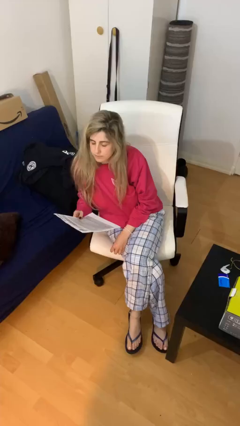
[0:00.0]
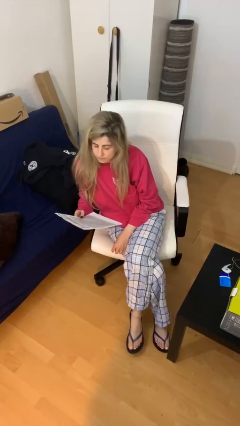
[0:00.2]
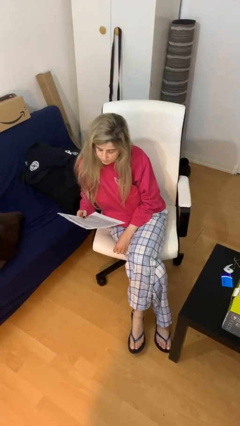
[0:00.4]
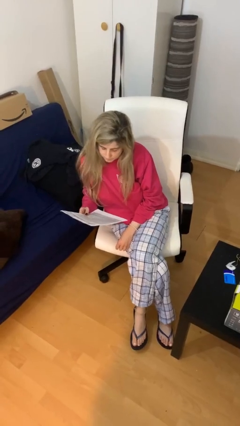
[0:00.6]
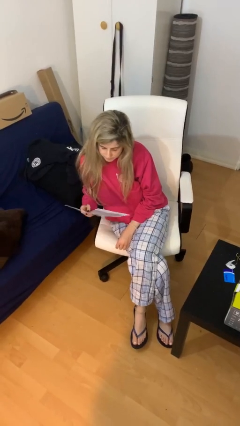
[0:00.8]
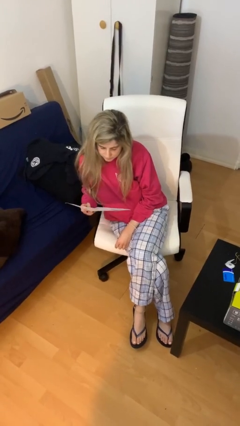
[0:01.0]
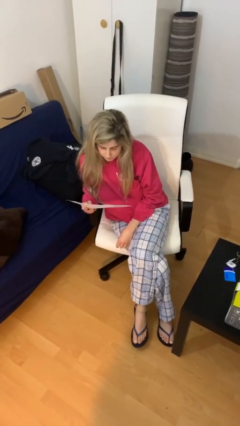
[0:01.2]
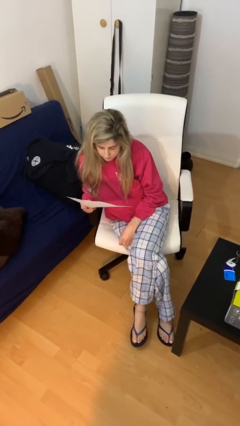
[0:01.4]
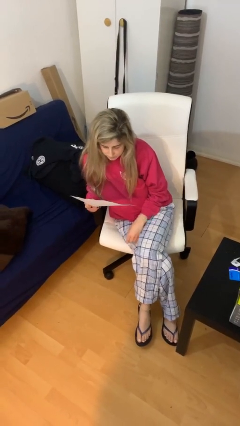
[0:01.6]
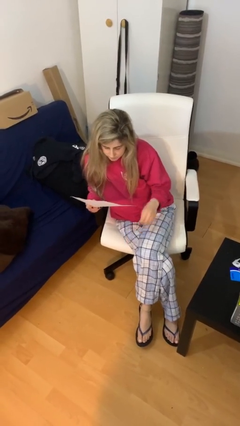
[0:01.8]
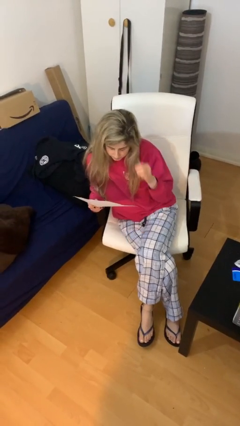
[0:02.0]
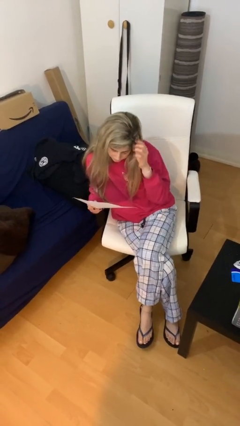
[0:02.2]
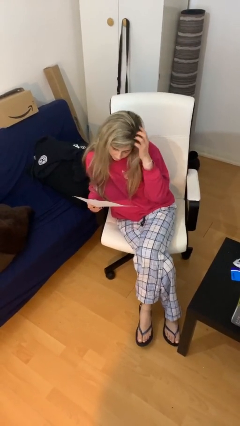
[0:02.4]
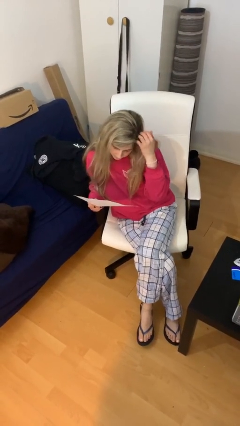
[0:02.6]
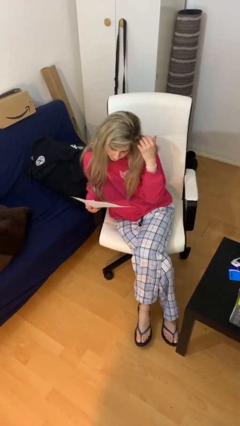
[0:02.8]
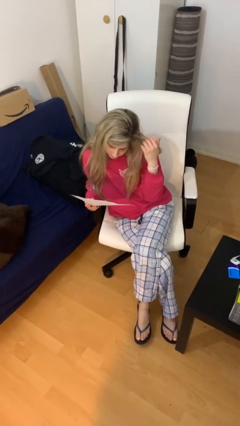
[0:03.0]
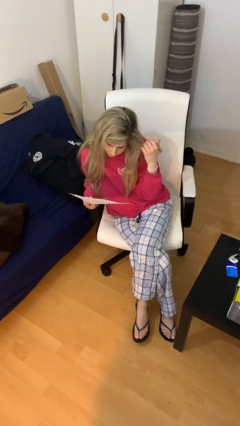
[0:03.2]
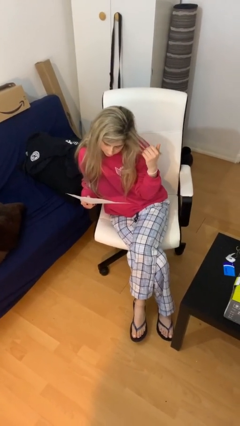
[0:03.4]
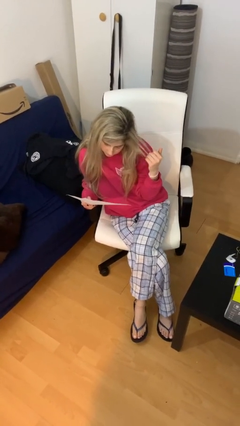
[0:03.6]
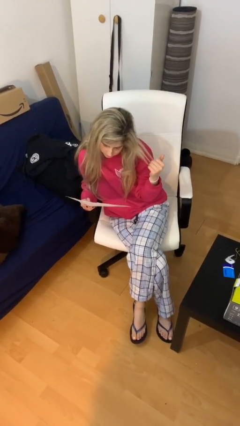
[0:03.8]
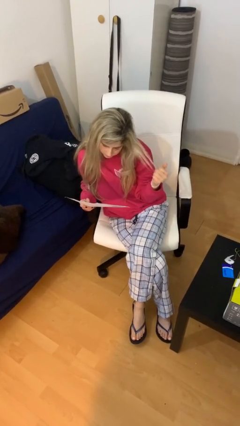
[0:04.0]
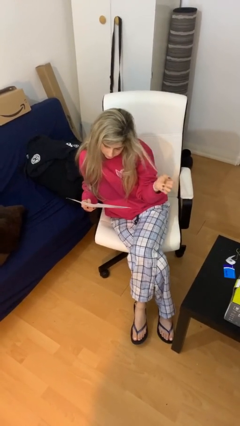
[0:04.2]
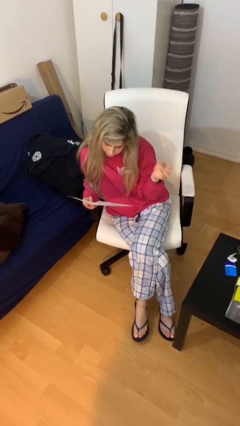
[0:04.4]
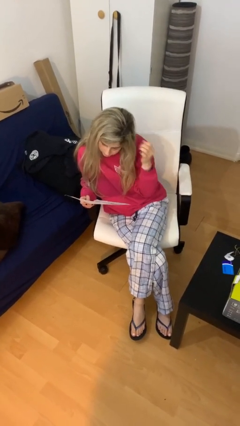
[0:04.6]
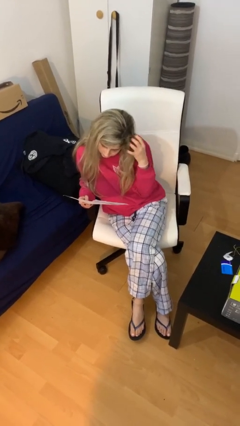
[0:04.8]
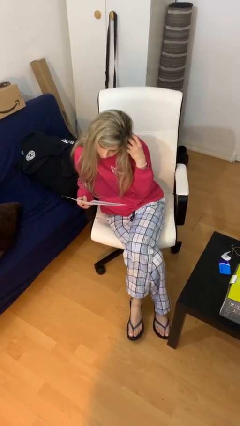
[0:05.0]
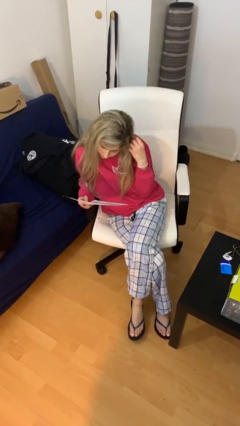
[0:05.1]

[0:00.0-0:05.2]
person reads document

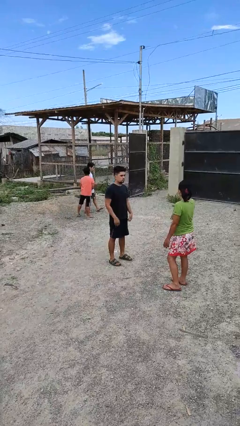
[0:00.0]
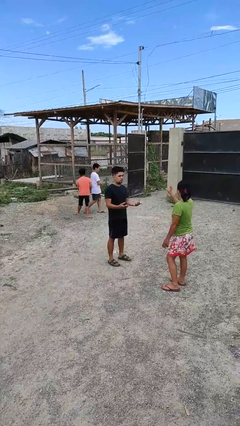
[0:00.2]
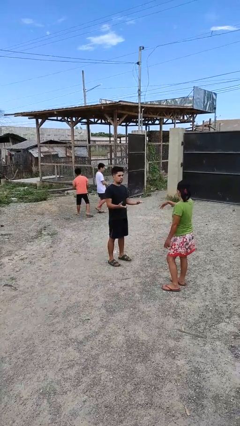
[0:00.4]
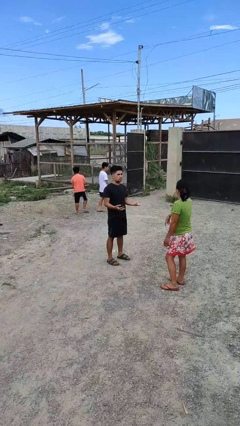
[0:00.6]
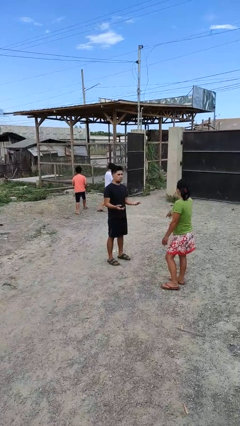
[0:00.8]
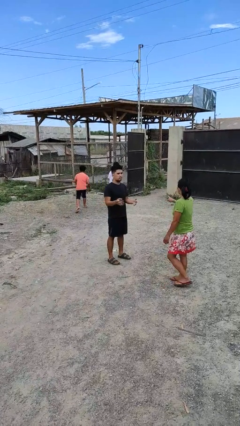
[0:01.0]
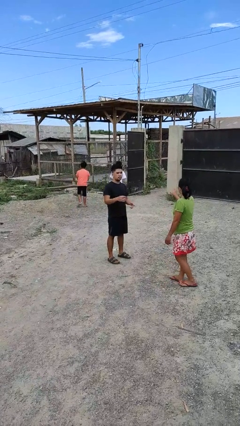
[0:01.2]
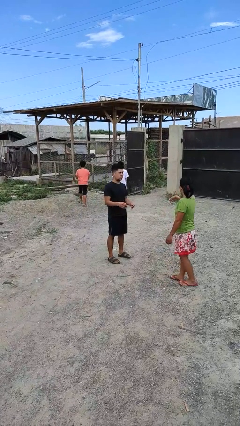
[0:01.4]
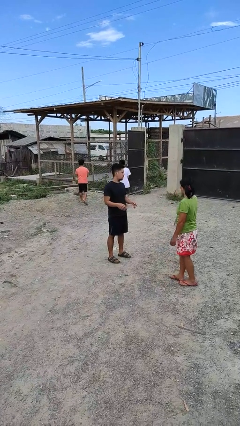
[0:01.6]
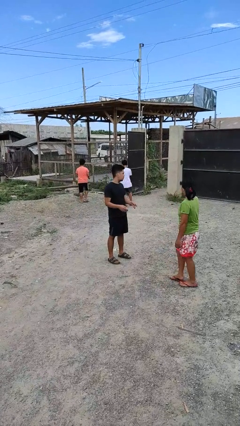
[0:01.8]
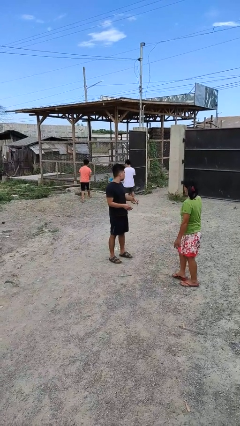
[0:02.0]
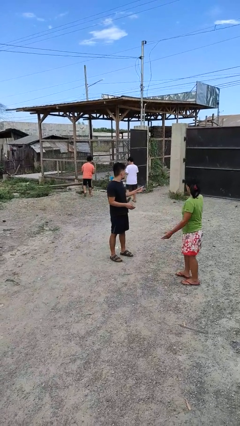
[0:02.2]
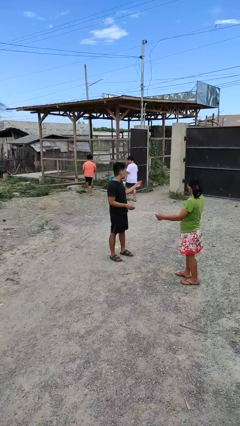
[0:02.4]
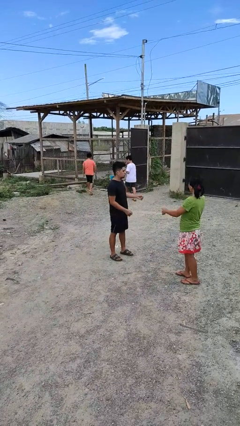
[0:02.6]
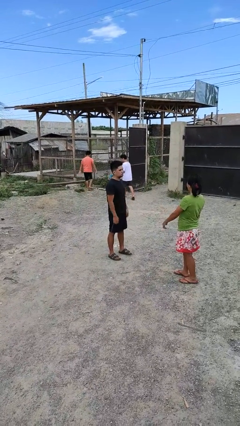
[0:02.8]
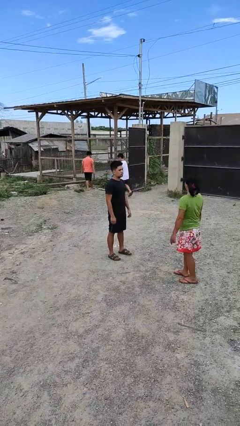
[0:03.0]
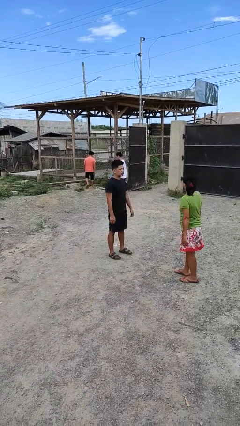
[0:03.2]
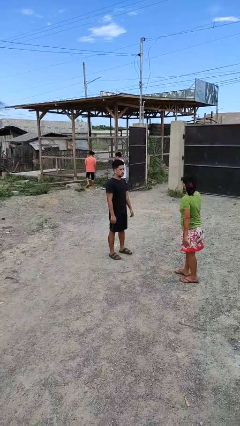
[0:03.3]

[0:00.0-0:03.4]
person talks to person

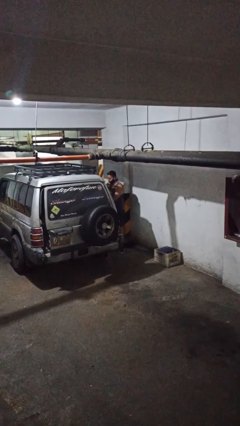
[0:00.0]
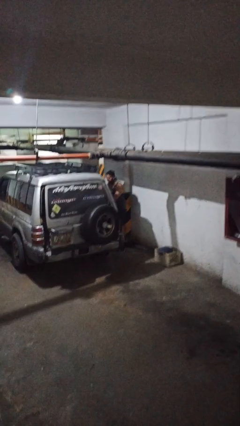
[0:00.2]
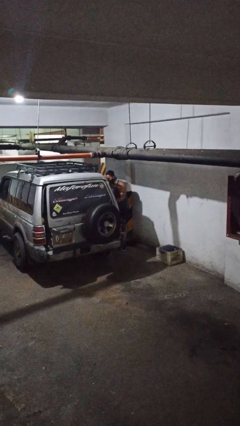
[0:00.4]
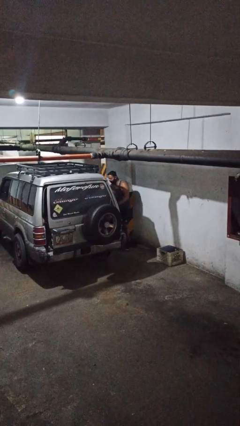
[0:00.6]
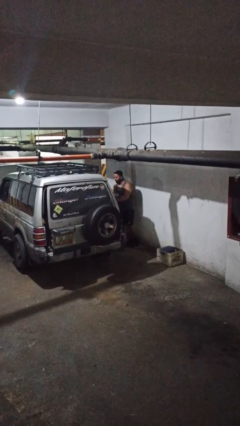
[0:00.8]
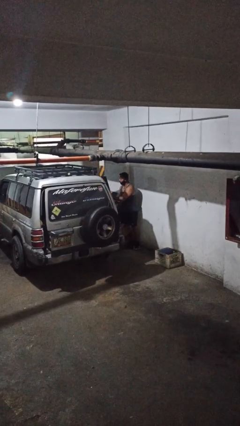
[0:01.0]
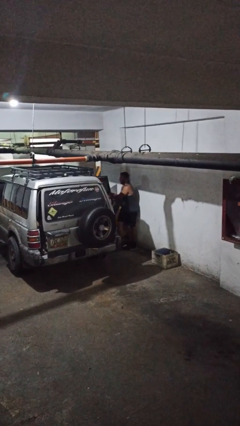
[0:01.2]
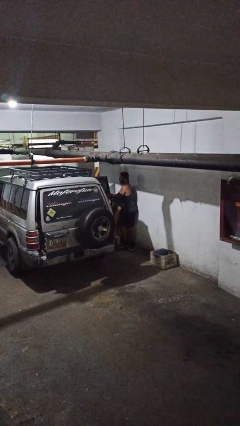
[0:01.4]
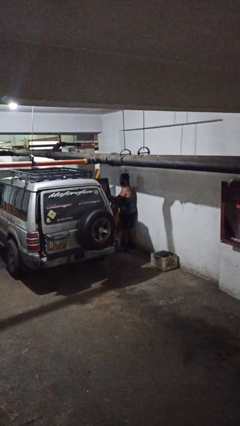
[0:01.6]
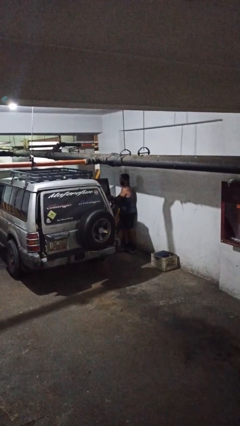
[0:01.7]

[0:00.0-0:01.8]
person opens car door

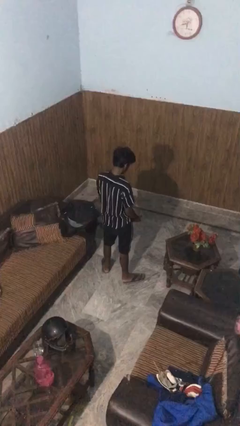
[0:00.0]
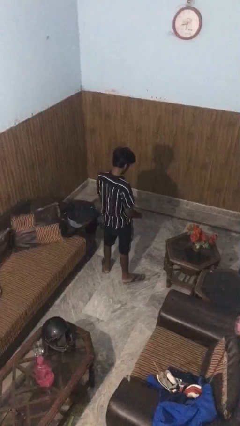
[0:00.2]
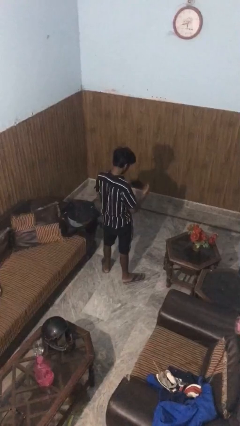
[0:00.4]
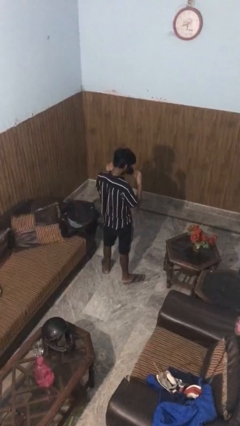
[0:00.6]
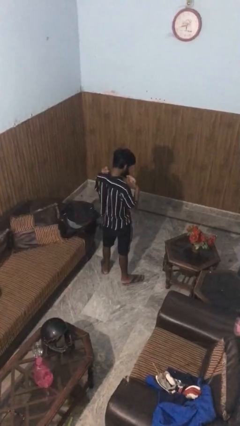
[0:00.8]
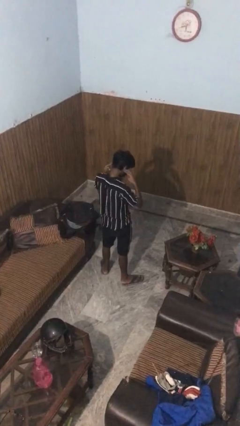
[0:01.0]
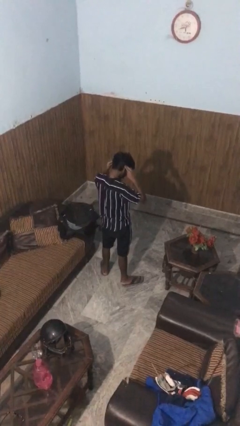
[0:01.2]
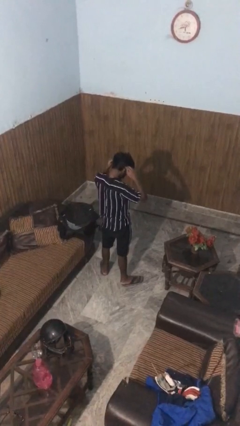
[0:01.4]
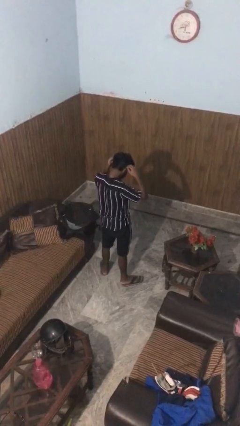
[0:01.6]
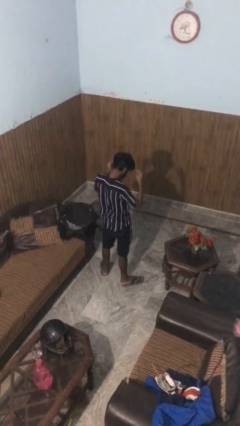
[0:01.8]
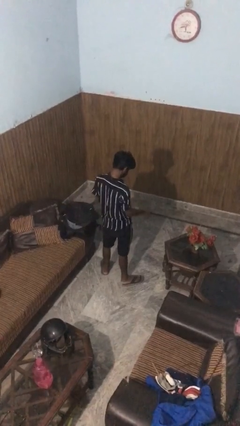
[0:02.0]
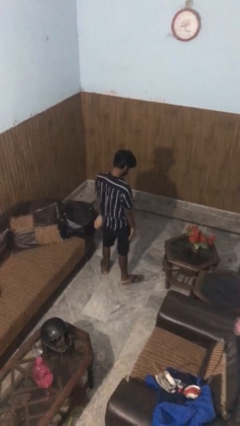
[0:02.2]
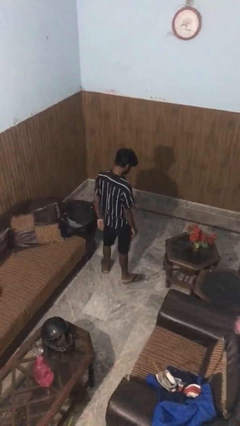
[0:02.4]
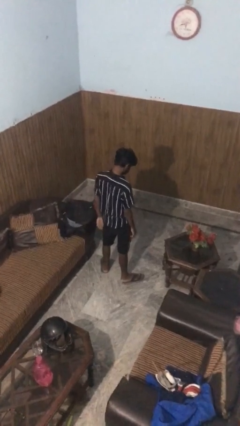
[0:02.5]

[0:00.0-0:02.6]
person puts on facemask

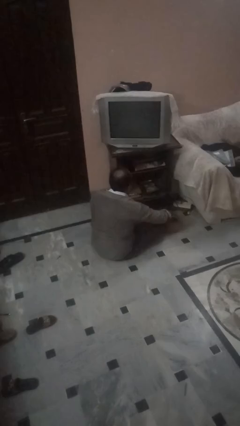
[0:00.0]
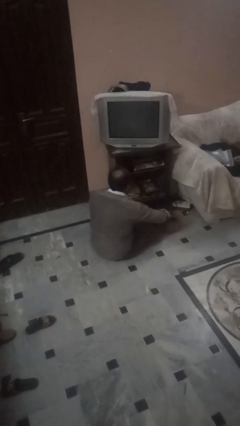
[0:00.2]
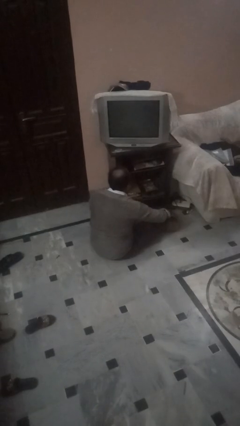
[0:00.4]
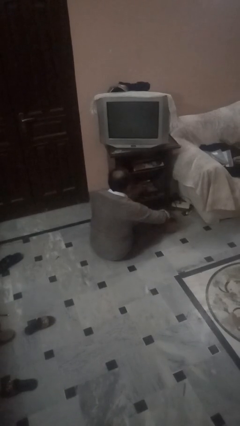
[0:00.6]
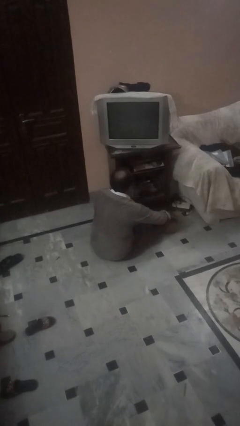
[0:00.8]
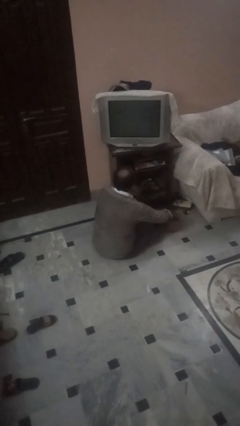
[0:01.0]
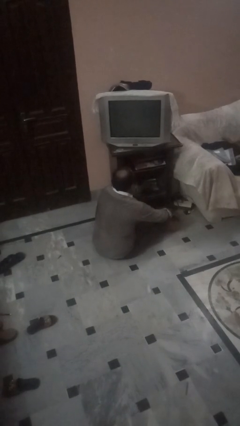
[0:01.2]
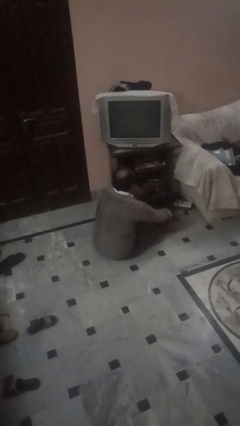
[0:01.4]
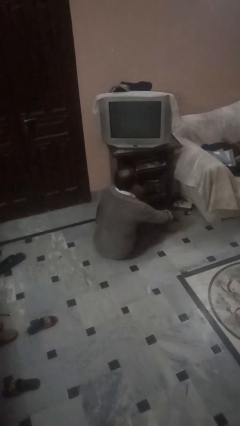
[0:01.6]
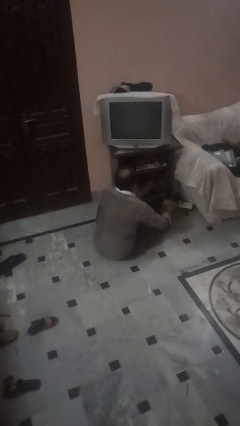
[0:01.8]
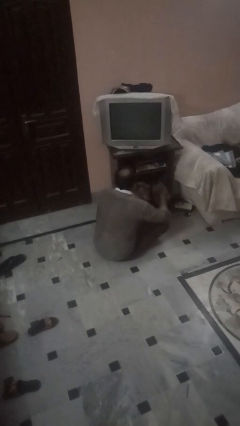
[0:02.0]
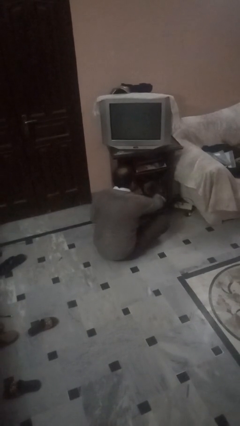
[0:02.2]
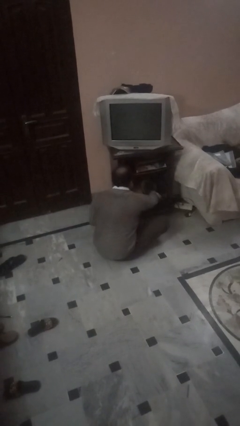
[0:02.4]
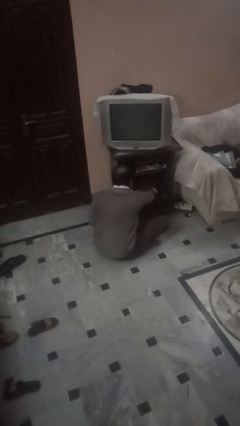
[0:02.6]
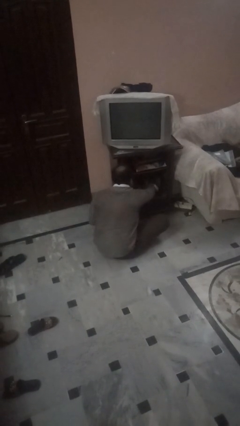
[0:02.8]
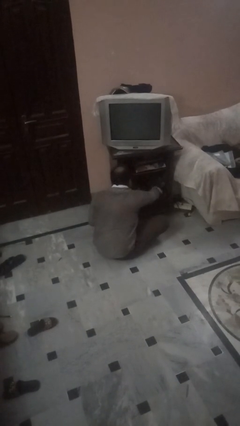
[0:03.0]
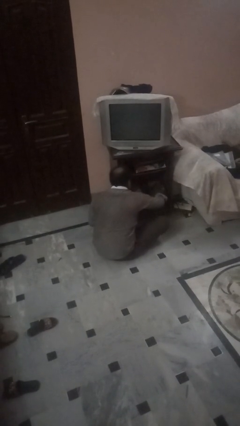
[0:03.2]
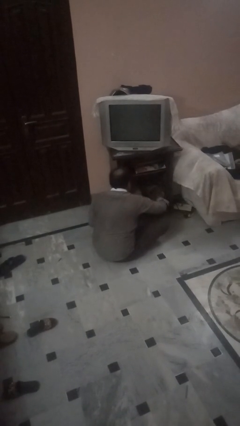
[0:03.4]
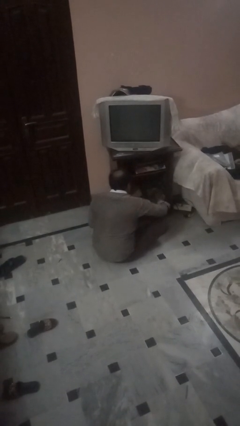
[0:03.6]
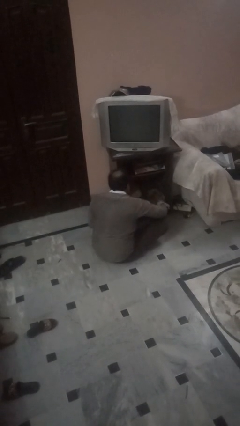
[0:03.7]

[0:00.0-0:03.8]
person dusts furniture

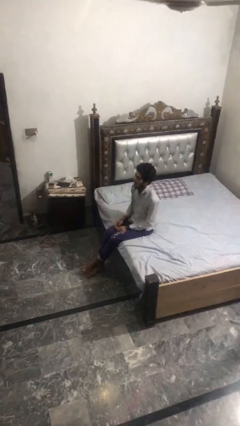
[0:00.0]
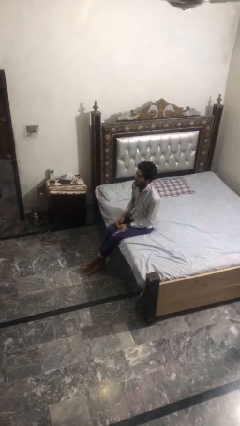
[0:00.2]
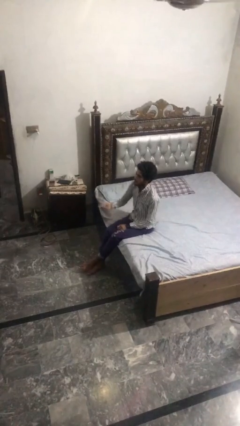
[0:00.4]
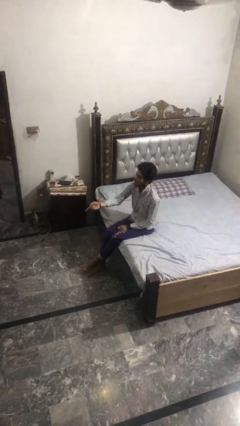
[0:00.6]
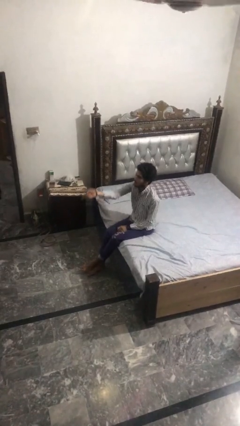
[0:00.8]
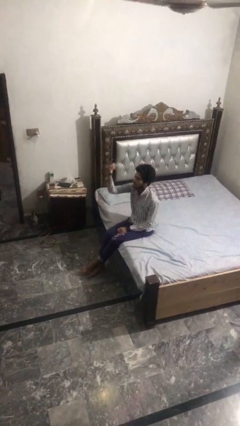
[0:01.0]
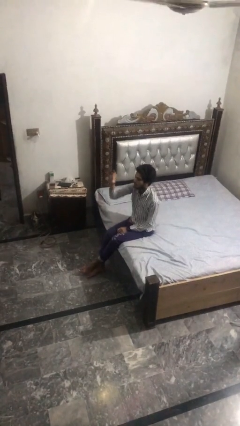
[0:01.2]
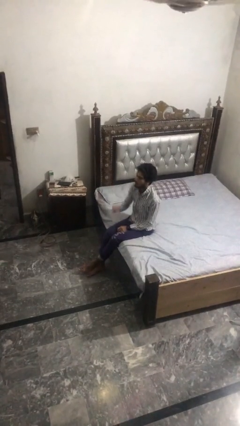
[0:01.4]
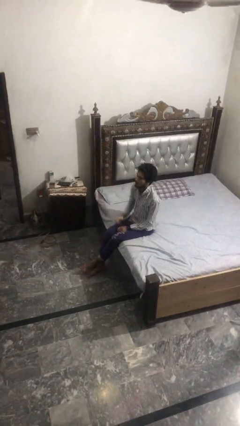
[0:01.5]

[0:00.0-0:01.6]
person gestures swipe up
